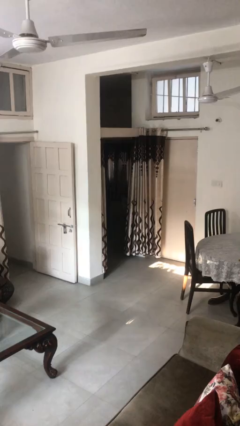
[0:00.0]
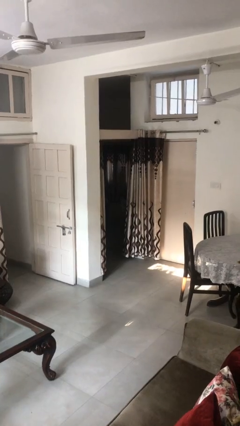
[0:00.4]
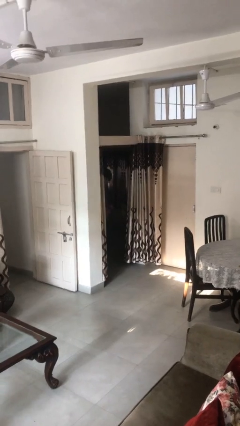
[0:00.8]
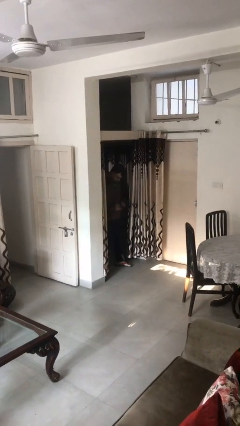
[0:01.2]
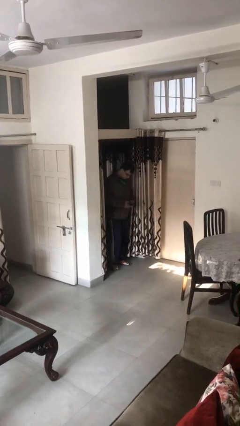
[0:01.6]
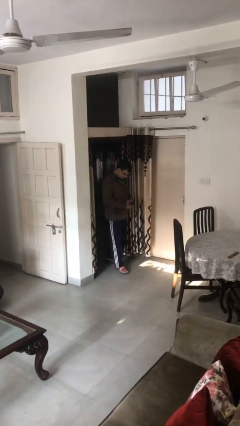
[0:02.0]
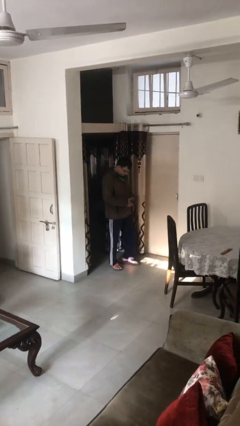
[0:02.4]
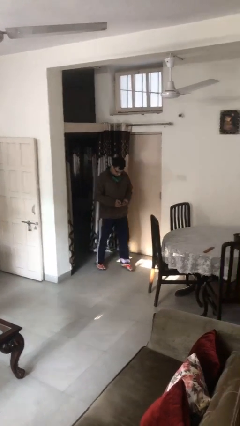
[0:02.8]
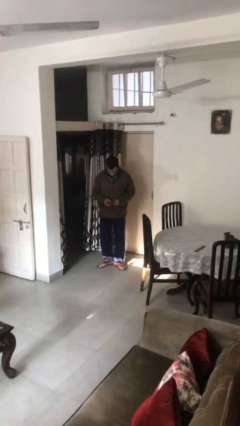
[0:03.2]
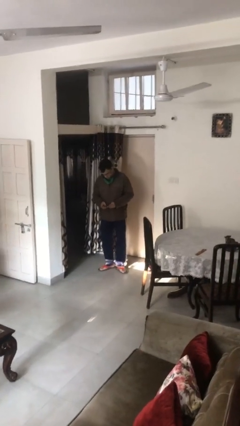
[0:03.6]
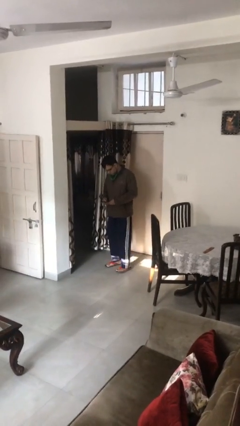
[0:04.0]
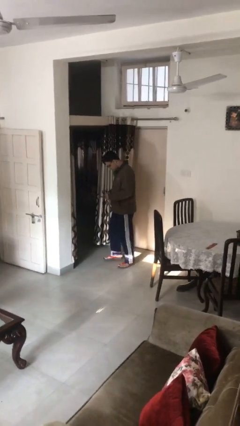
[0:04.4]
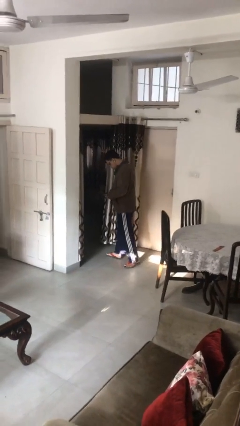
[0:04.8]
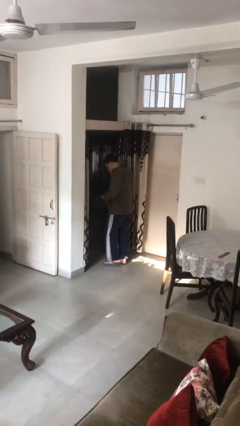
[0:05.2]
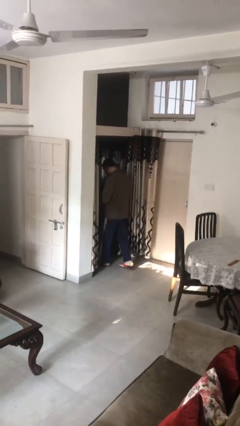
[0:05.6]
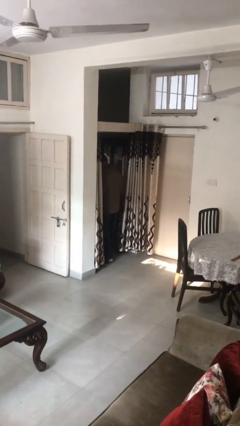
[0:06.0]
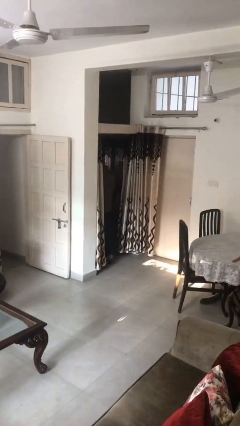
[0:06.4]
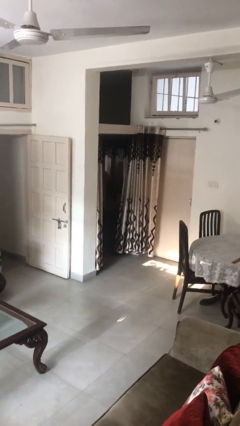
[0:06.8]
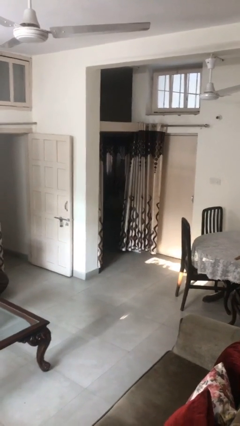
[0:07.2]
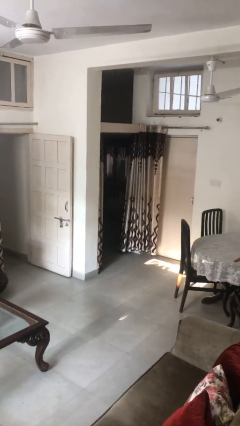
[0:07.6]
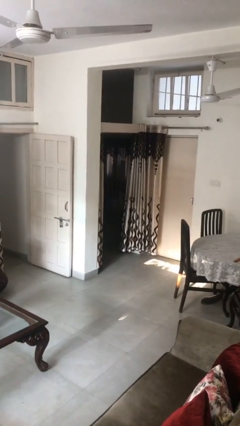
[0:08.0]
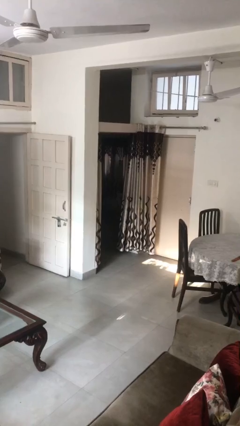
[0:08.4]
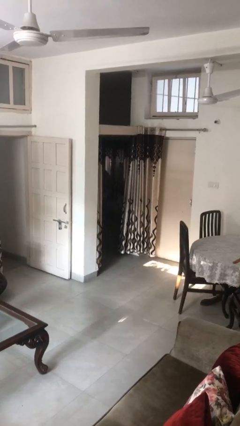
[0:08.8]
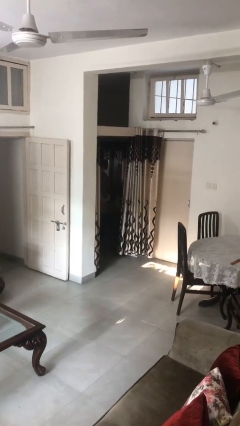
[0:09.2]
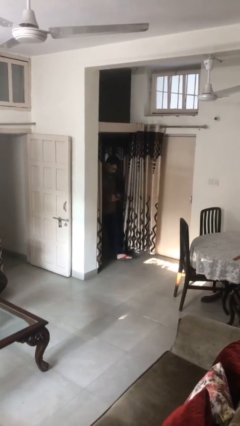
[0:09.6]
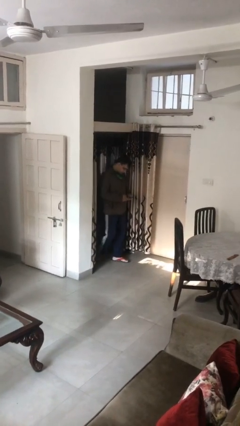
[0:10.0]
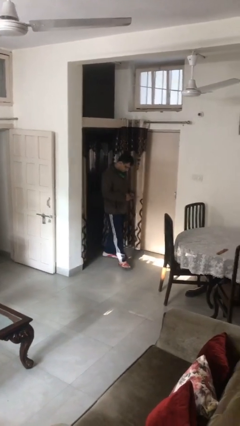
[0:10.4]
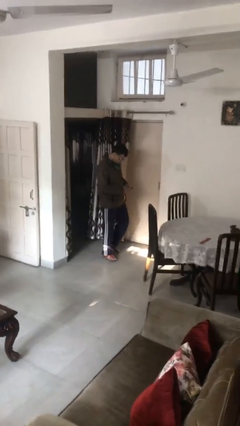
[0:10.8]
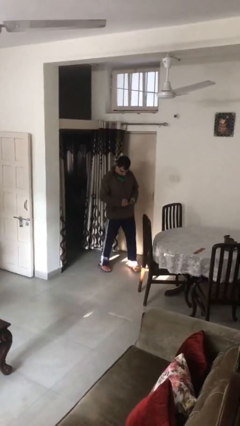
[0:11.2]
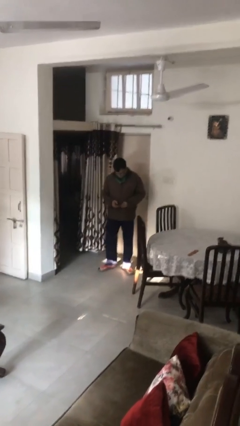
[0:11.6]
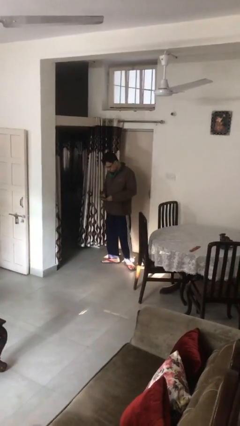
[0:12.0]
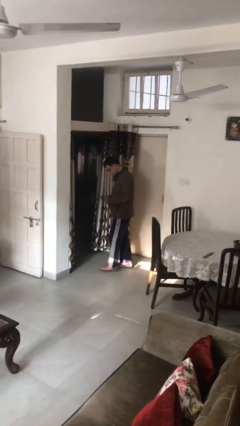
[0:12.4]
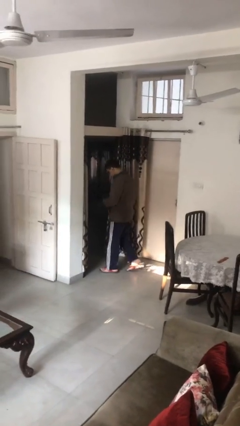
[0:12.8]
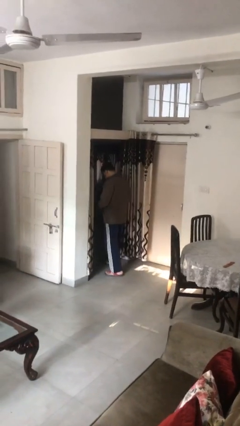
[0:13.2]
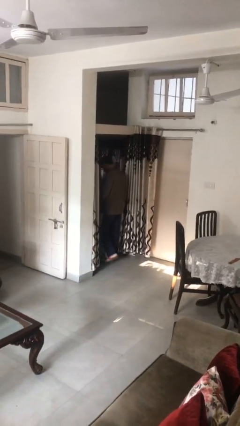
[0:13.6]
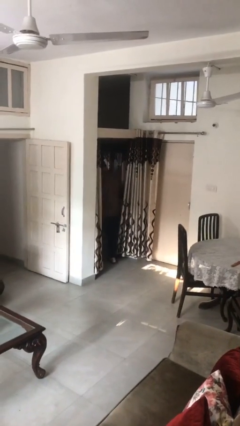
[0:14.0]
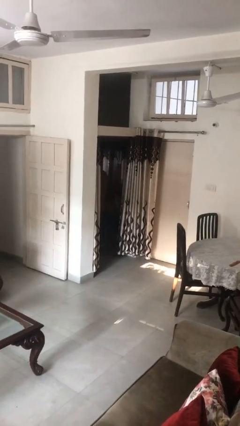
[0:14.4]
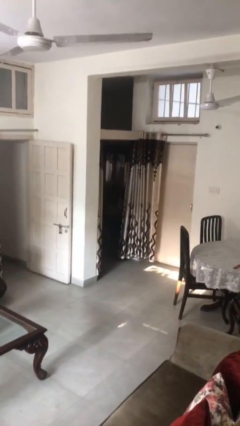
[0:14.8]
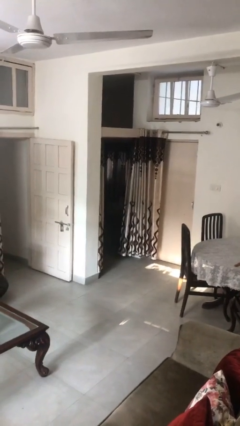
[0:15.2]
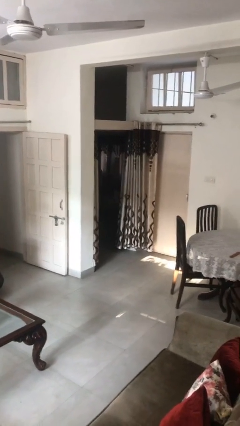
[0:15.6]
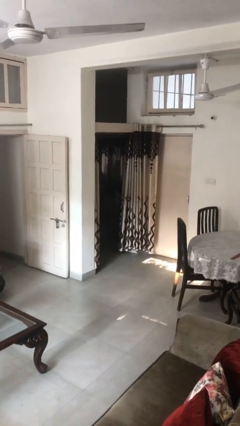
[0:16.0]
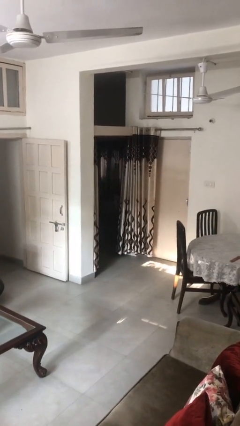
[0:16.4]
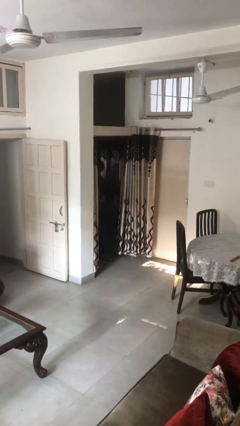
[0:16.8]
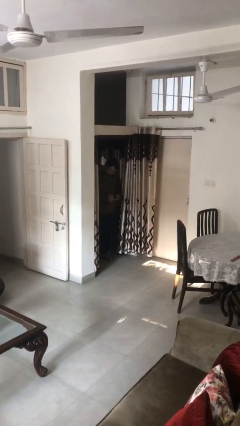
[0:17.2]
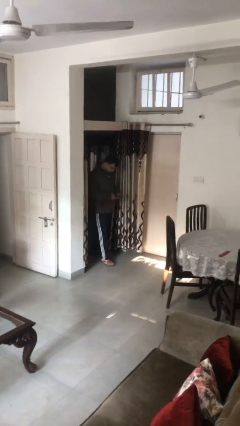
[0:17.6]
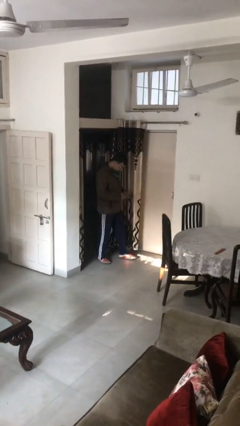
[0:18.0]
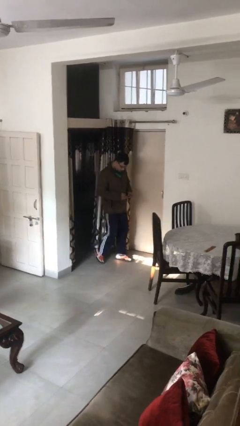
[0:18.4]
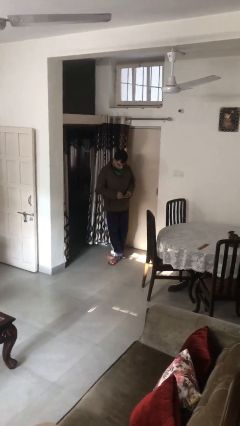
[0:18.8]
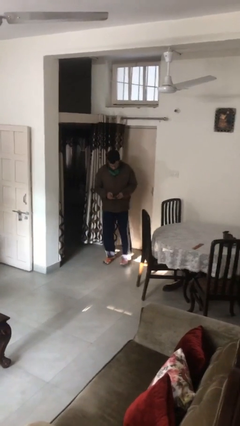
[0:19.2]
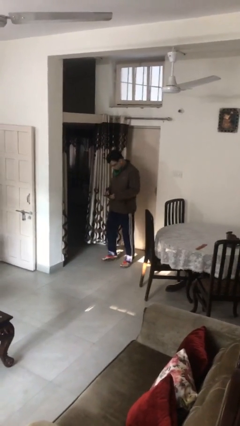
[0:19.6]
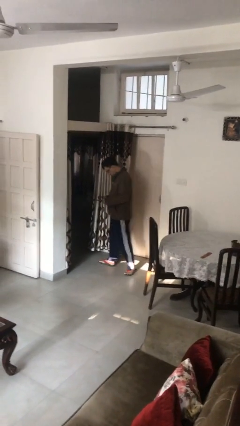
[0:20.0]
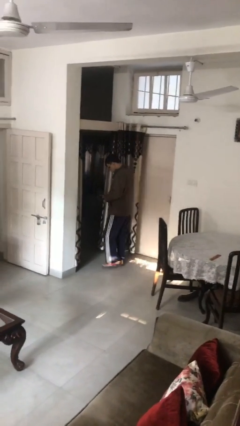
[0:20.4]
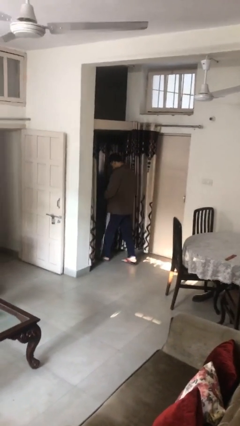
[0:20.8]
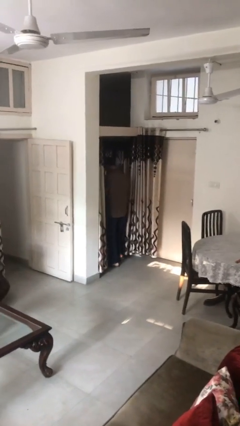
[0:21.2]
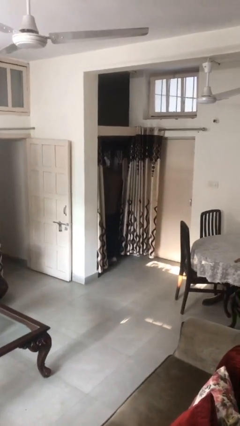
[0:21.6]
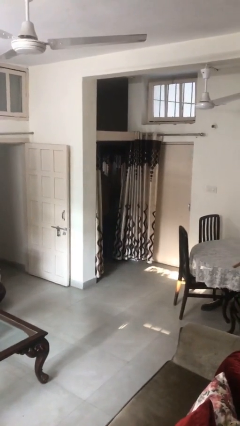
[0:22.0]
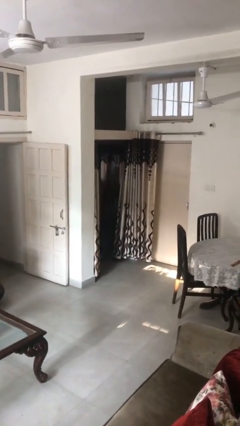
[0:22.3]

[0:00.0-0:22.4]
person texts on phone

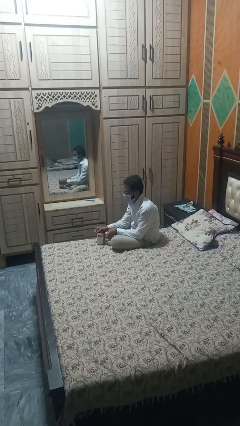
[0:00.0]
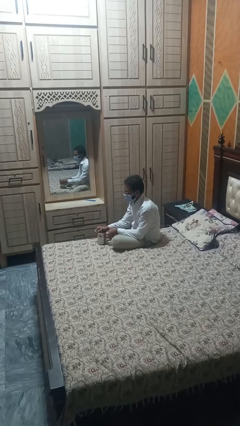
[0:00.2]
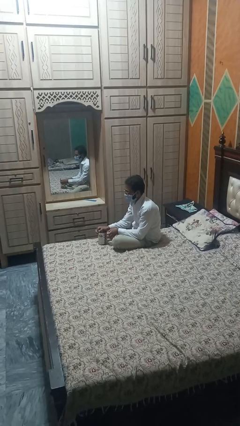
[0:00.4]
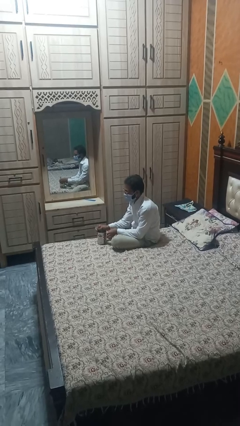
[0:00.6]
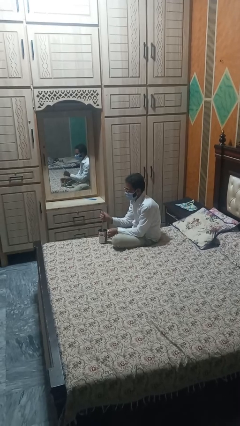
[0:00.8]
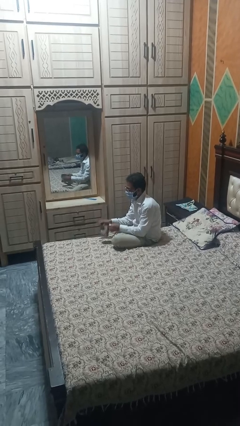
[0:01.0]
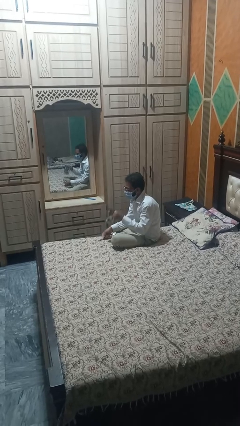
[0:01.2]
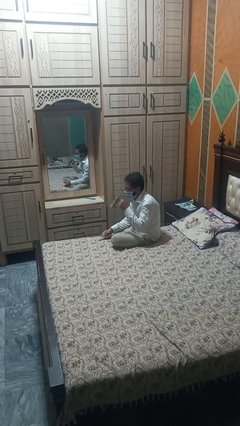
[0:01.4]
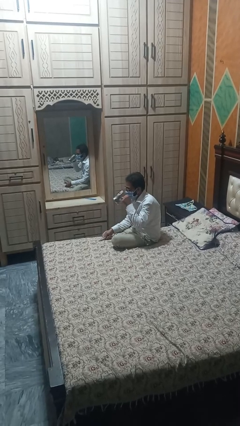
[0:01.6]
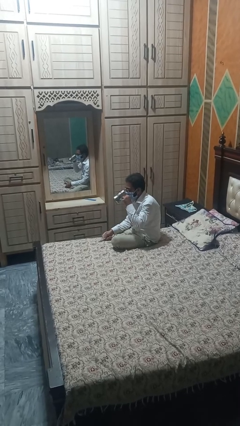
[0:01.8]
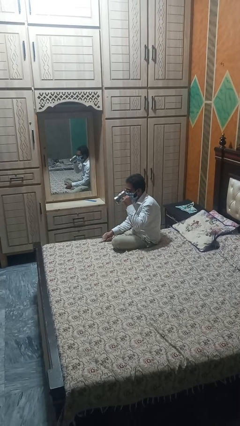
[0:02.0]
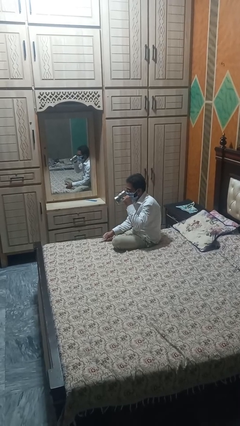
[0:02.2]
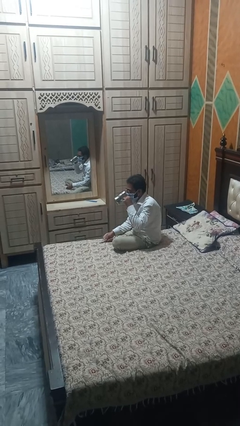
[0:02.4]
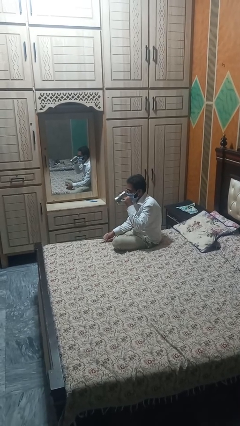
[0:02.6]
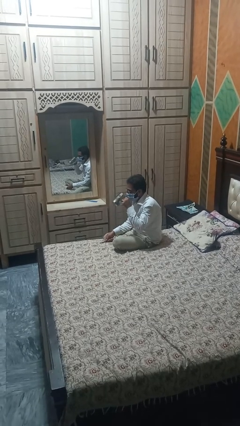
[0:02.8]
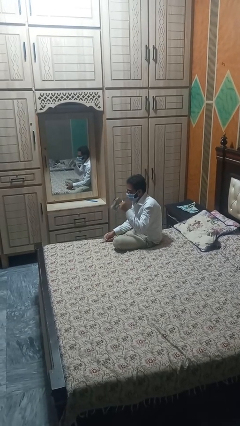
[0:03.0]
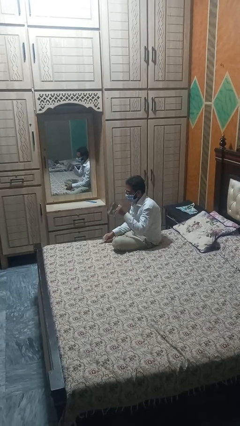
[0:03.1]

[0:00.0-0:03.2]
person drinks from mug

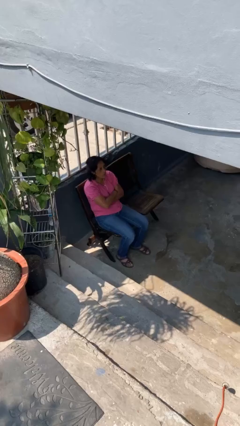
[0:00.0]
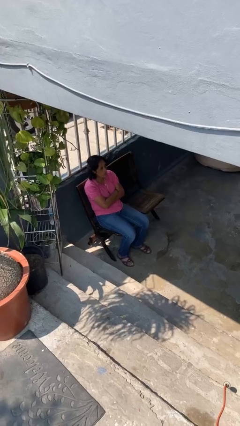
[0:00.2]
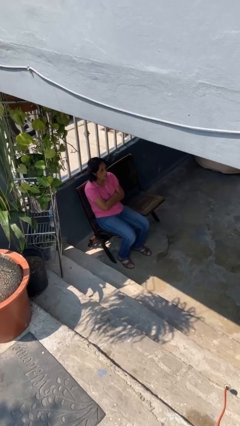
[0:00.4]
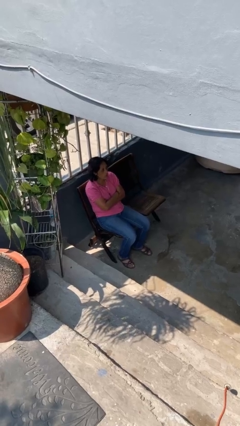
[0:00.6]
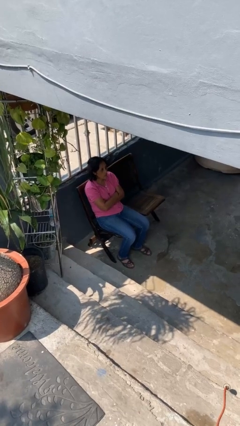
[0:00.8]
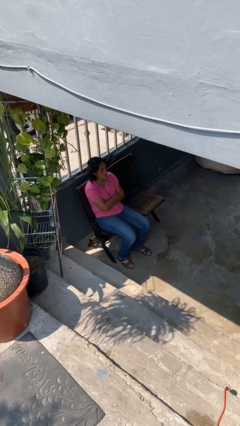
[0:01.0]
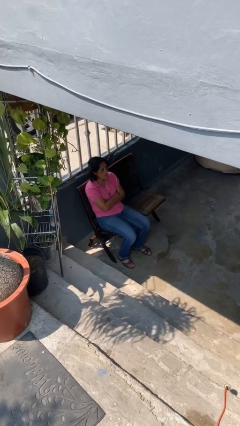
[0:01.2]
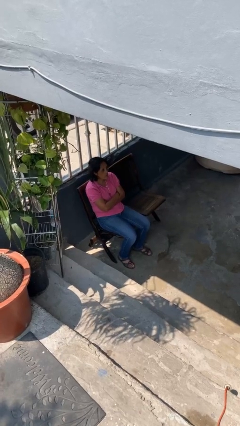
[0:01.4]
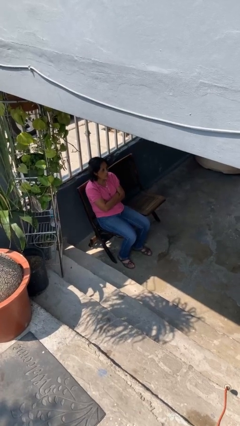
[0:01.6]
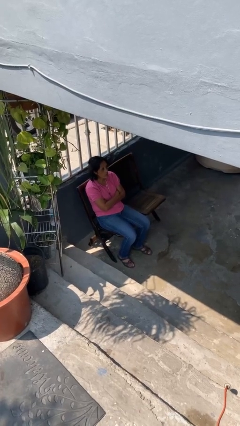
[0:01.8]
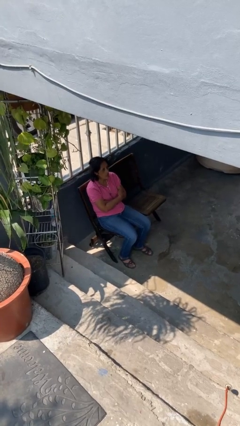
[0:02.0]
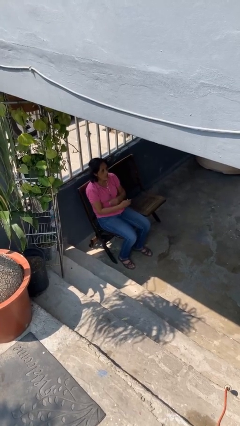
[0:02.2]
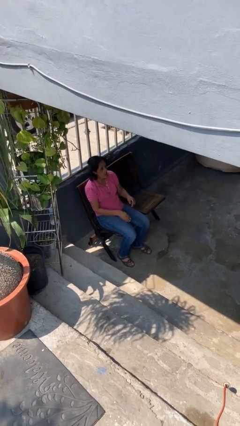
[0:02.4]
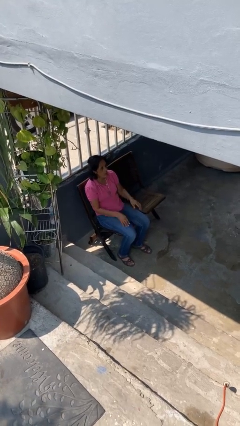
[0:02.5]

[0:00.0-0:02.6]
person crosses arms

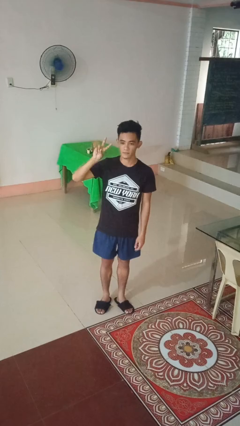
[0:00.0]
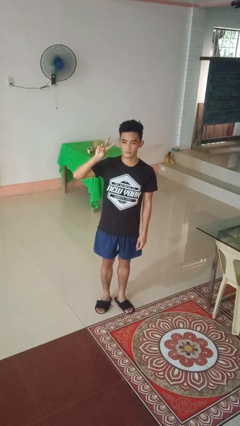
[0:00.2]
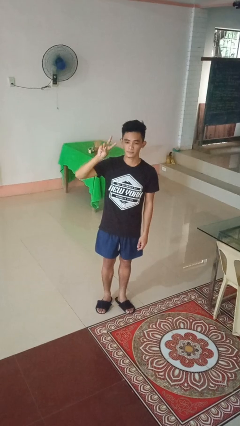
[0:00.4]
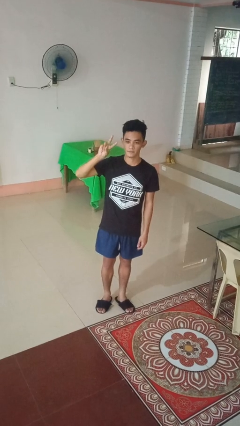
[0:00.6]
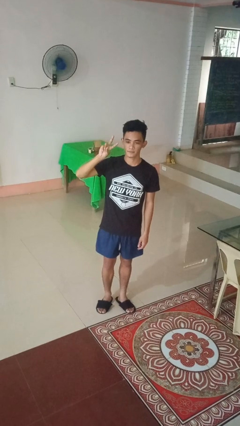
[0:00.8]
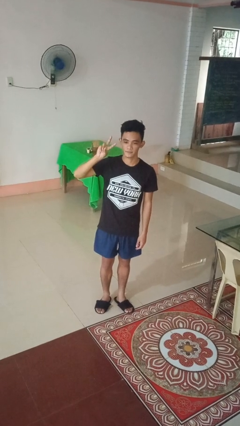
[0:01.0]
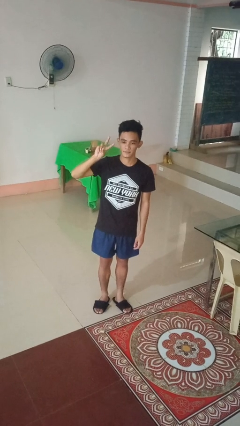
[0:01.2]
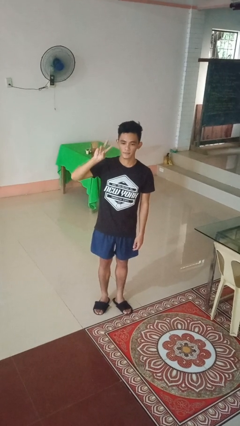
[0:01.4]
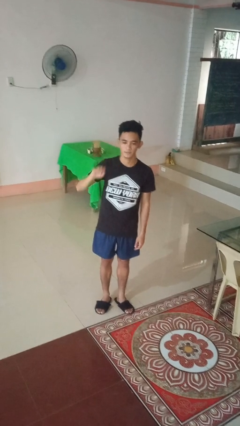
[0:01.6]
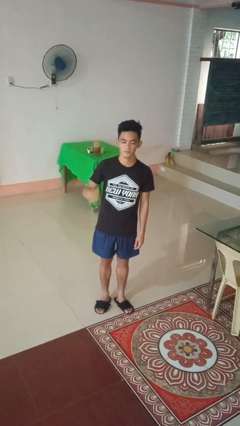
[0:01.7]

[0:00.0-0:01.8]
person gestures peace
